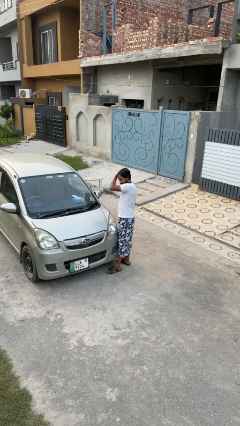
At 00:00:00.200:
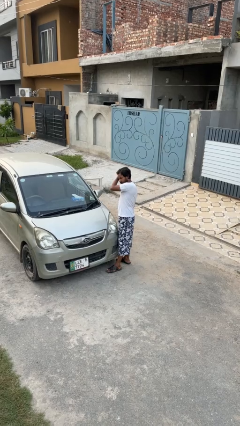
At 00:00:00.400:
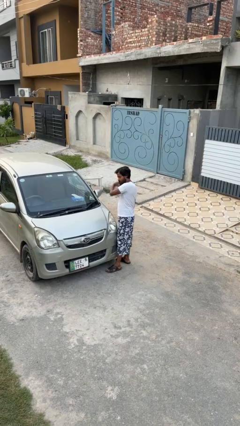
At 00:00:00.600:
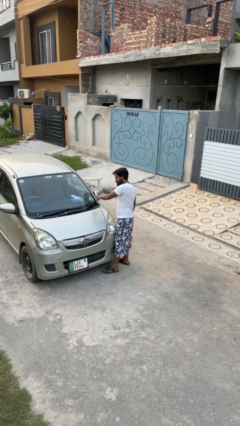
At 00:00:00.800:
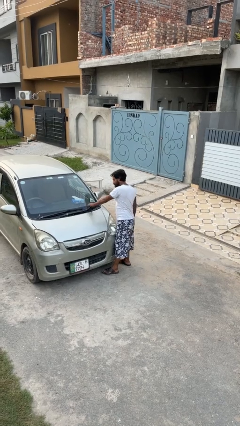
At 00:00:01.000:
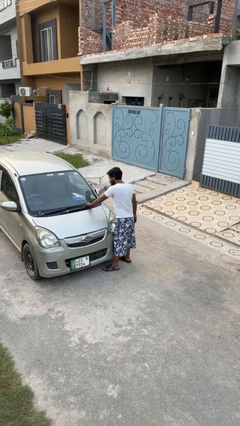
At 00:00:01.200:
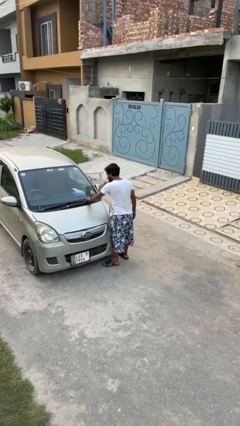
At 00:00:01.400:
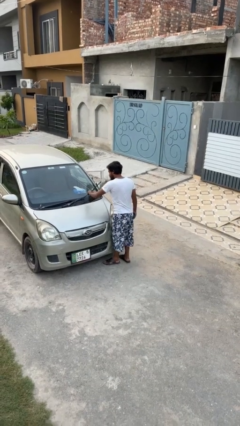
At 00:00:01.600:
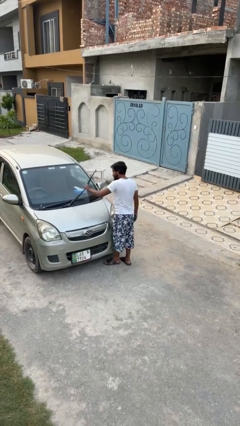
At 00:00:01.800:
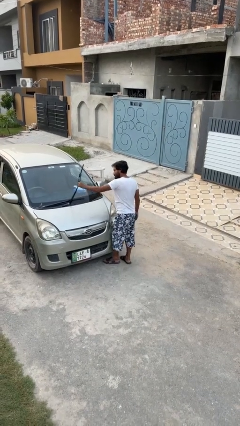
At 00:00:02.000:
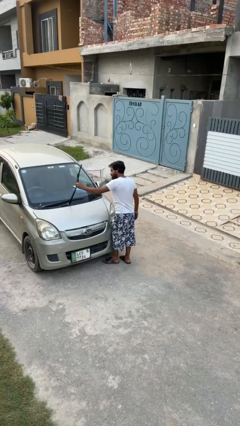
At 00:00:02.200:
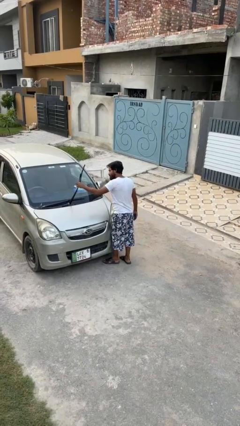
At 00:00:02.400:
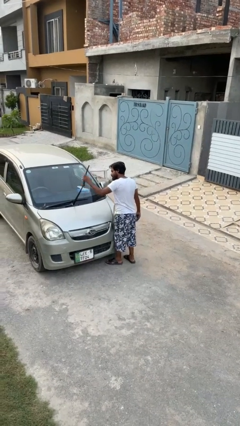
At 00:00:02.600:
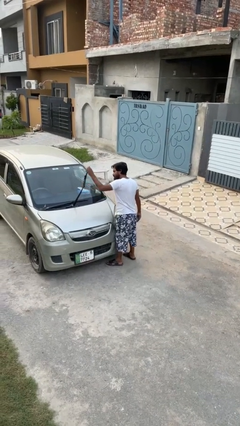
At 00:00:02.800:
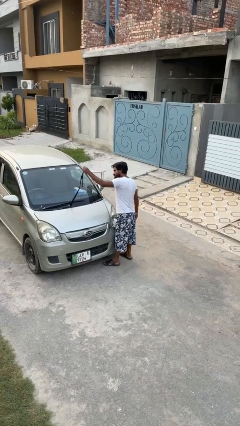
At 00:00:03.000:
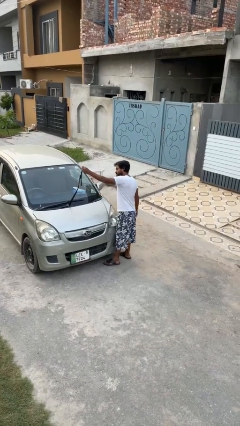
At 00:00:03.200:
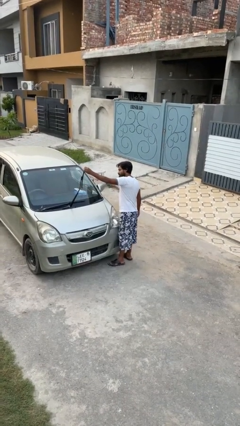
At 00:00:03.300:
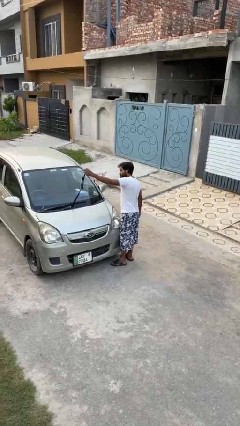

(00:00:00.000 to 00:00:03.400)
person flips up car wipers

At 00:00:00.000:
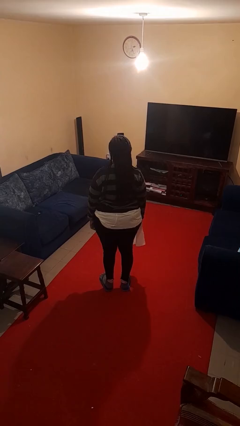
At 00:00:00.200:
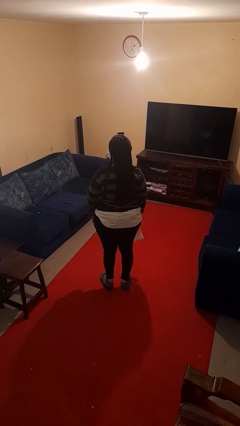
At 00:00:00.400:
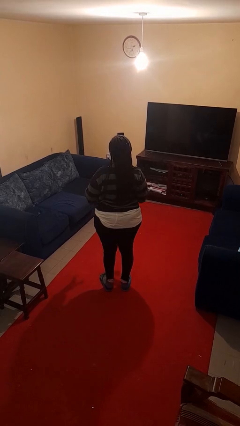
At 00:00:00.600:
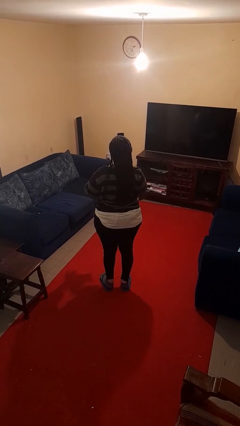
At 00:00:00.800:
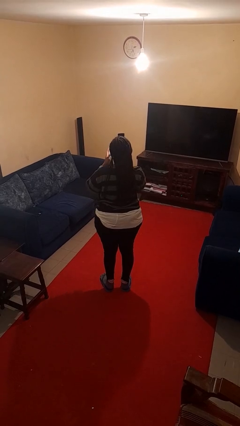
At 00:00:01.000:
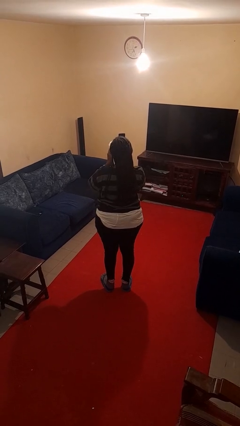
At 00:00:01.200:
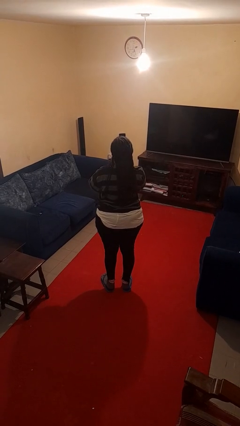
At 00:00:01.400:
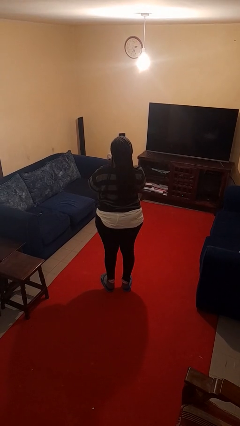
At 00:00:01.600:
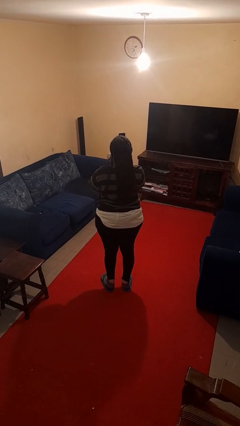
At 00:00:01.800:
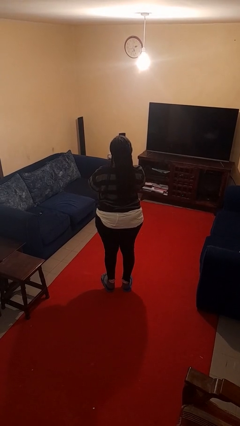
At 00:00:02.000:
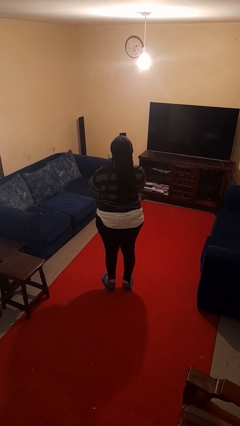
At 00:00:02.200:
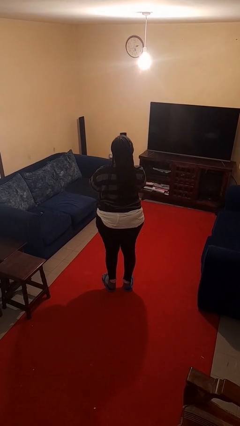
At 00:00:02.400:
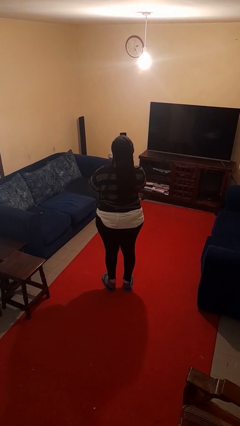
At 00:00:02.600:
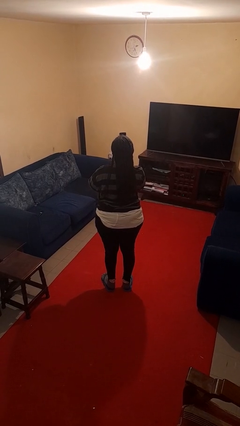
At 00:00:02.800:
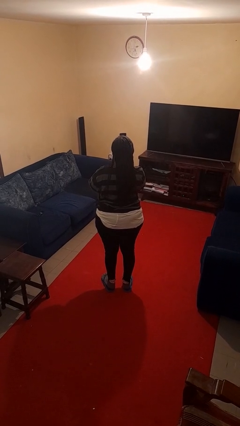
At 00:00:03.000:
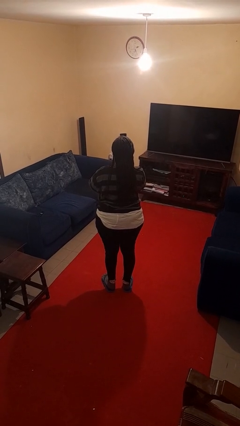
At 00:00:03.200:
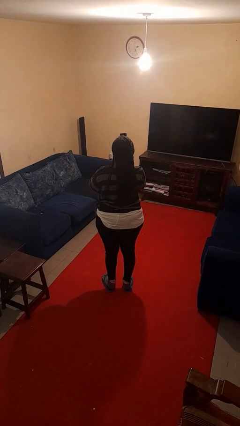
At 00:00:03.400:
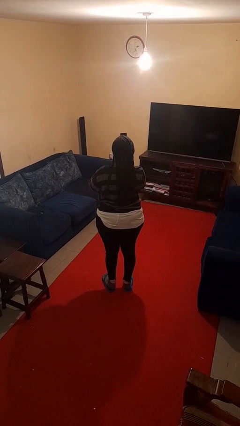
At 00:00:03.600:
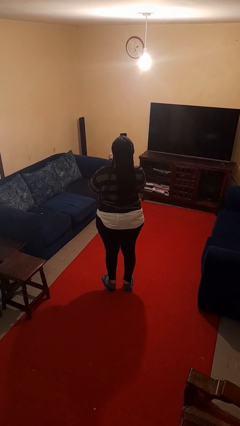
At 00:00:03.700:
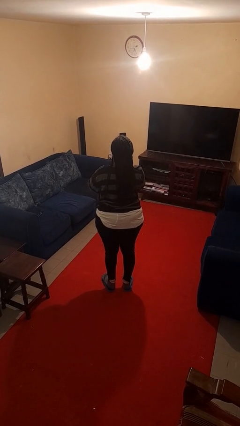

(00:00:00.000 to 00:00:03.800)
person wipes mouth with napkin

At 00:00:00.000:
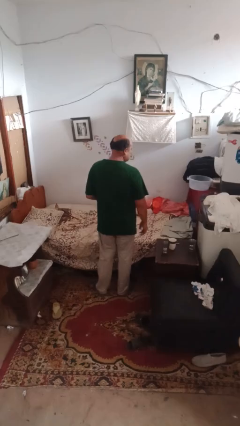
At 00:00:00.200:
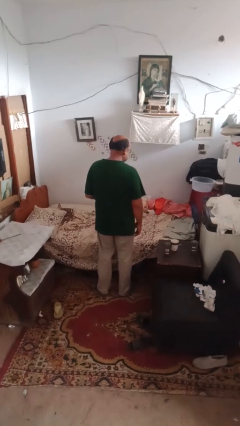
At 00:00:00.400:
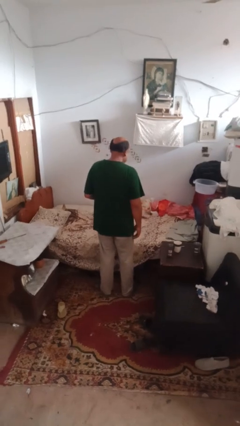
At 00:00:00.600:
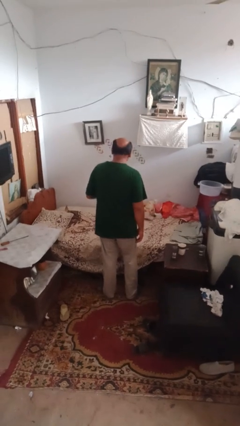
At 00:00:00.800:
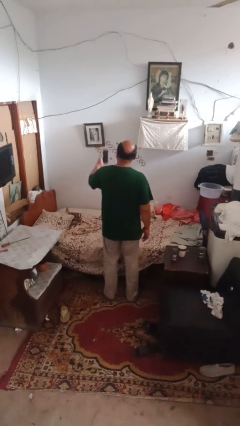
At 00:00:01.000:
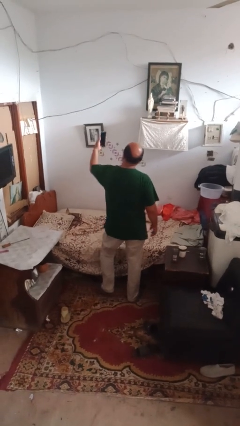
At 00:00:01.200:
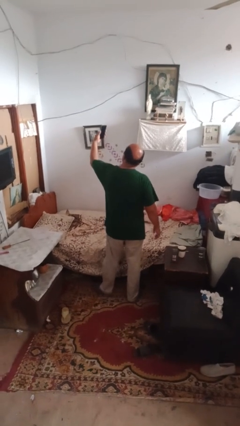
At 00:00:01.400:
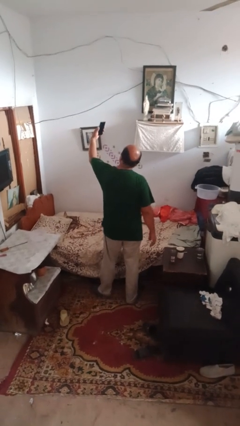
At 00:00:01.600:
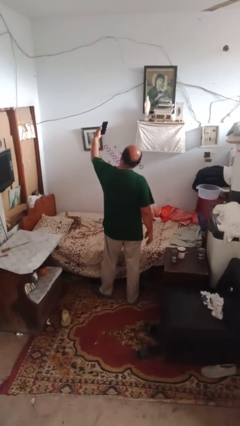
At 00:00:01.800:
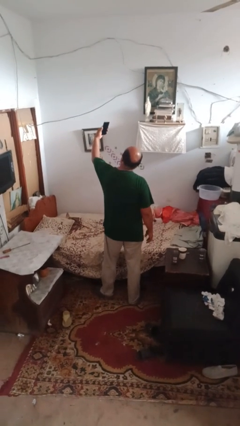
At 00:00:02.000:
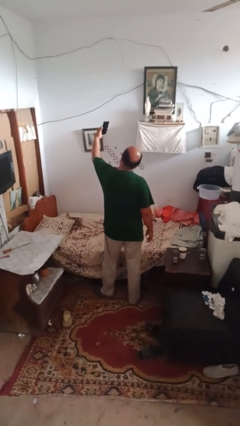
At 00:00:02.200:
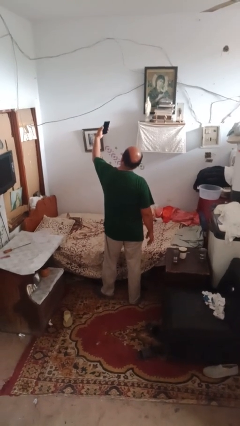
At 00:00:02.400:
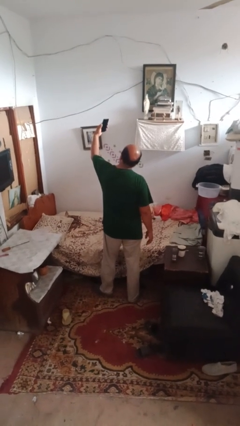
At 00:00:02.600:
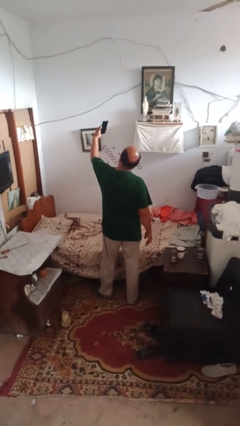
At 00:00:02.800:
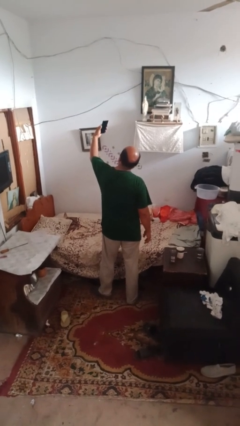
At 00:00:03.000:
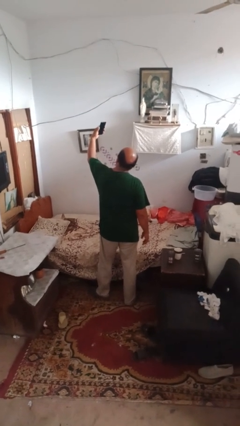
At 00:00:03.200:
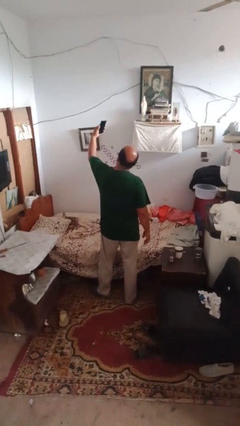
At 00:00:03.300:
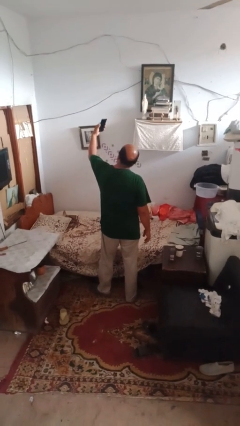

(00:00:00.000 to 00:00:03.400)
person takes selfie

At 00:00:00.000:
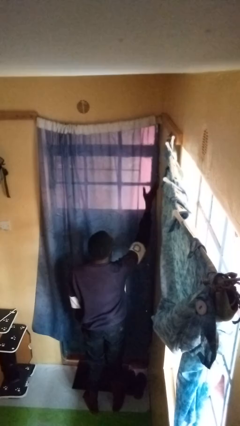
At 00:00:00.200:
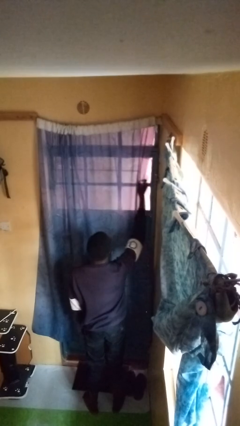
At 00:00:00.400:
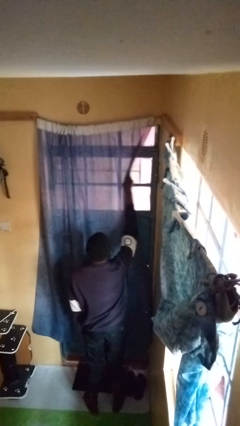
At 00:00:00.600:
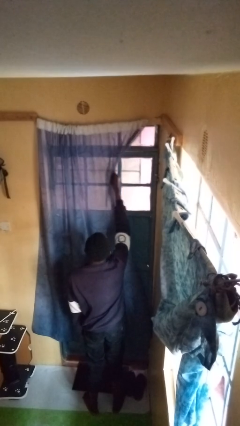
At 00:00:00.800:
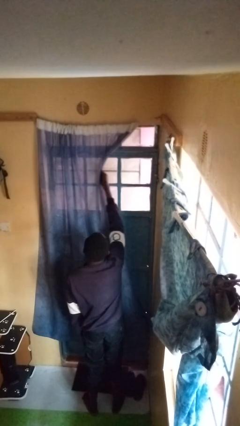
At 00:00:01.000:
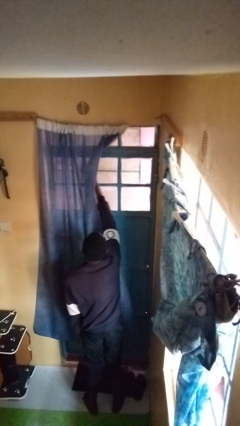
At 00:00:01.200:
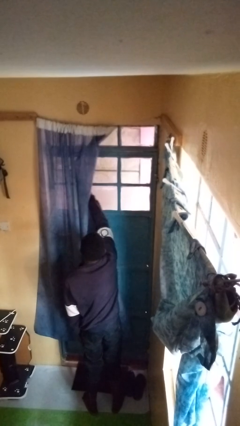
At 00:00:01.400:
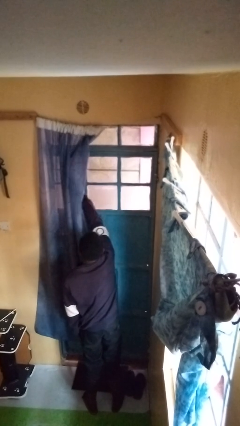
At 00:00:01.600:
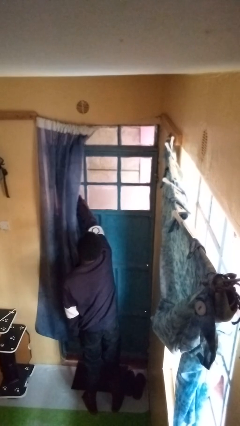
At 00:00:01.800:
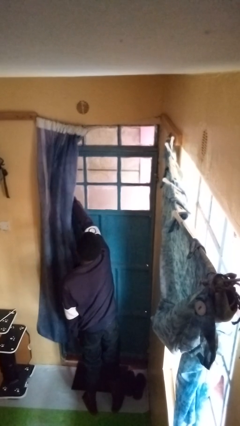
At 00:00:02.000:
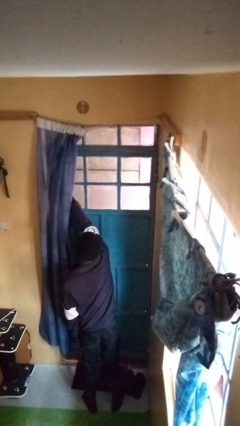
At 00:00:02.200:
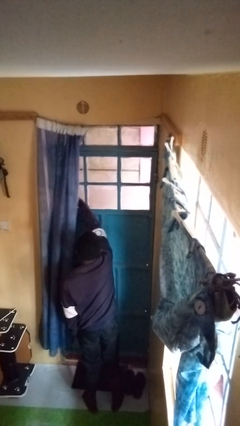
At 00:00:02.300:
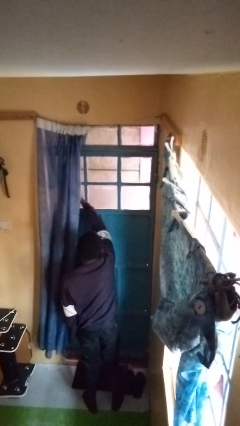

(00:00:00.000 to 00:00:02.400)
person opens curtains

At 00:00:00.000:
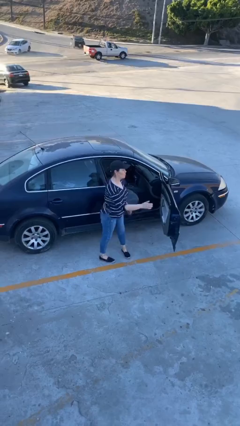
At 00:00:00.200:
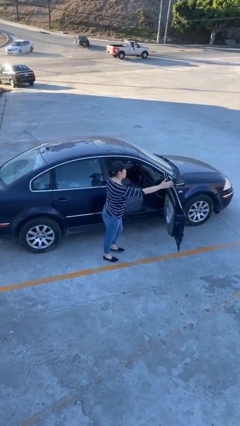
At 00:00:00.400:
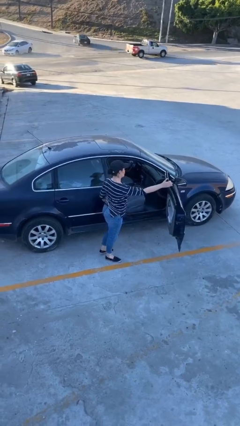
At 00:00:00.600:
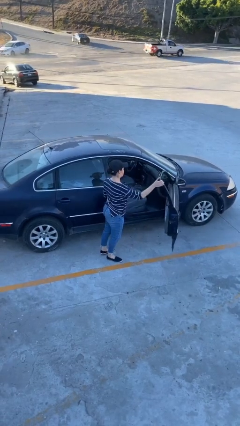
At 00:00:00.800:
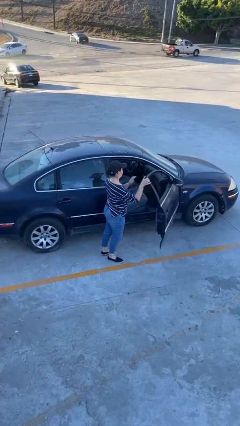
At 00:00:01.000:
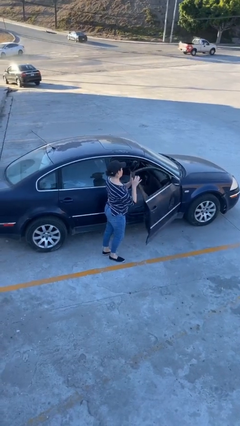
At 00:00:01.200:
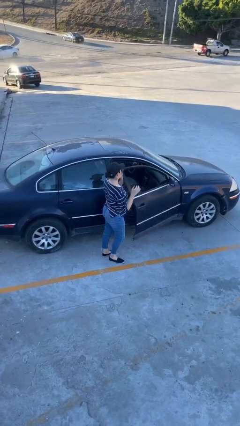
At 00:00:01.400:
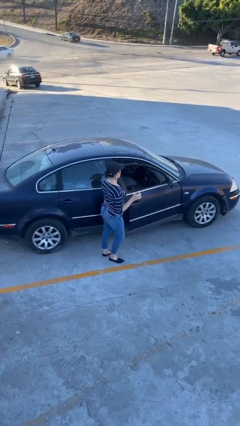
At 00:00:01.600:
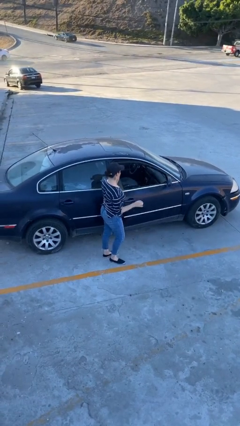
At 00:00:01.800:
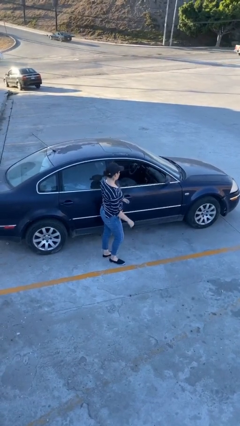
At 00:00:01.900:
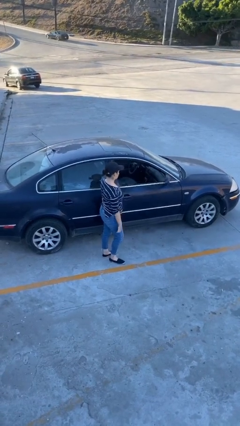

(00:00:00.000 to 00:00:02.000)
person closes car door

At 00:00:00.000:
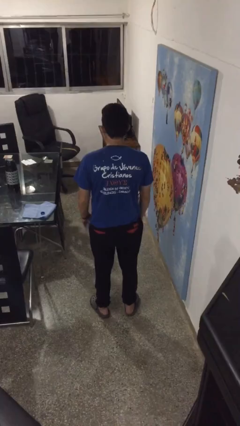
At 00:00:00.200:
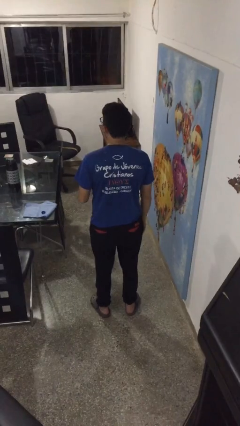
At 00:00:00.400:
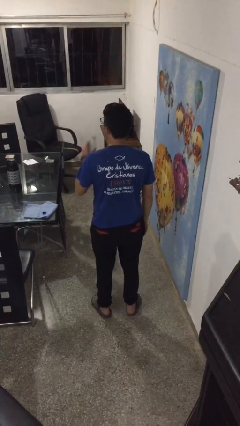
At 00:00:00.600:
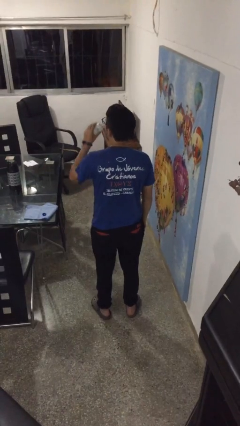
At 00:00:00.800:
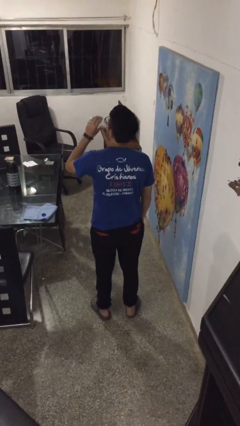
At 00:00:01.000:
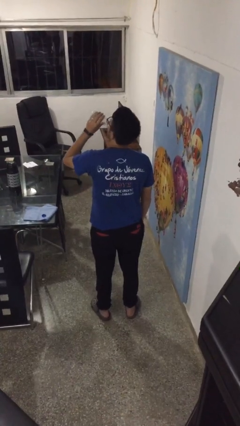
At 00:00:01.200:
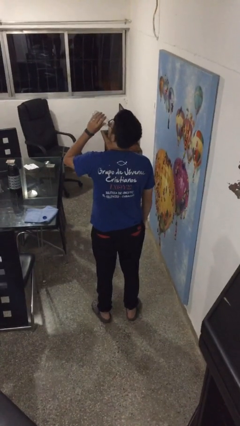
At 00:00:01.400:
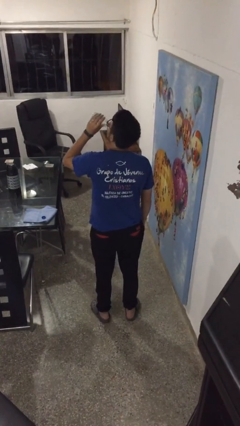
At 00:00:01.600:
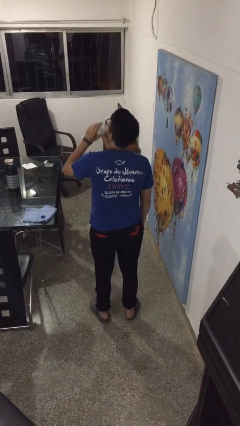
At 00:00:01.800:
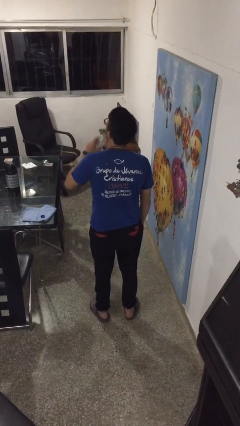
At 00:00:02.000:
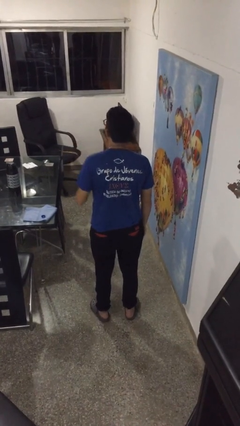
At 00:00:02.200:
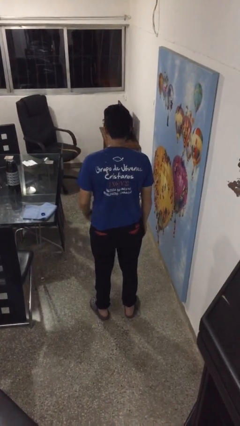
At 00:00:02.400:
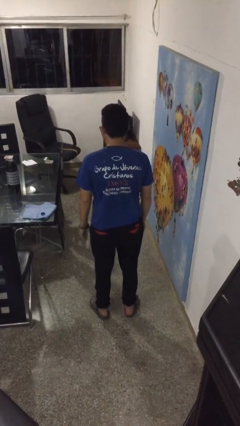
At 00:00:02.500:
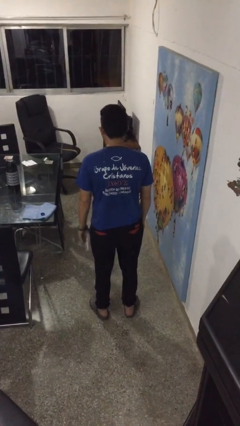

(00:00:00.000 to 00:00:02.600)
person drinks from bottle
